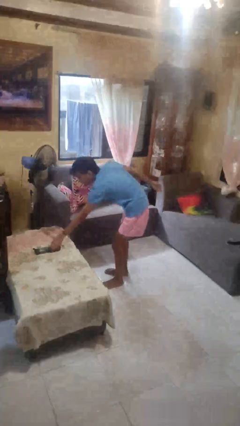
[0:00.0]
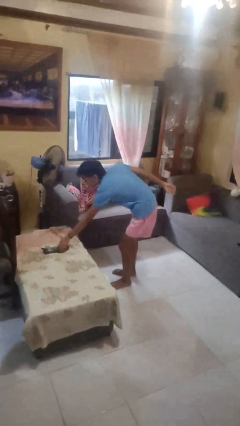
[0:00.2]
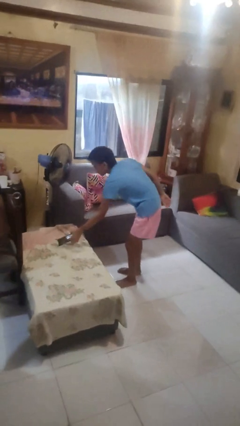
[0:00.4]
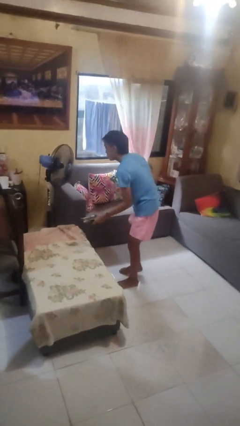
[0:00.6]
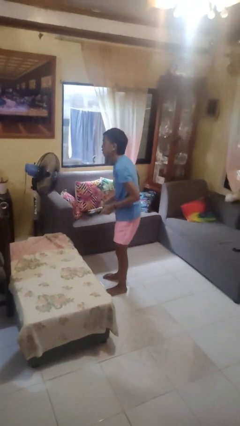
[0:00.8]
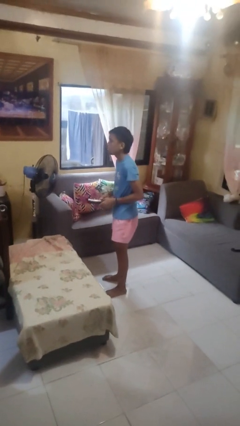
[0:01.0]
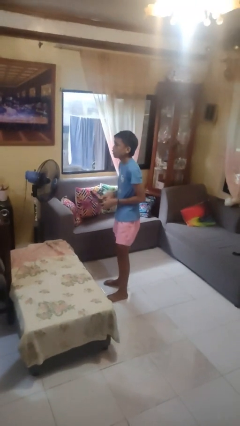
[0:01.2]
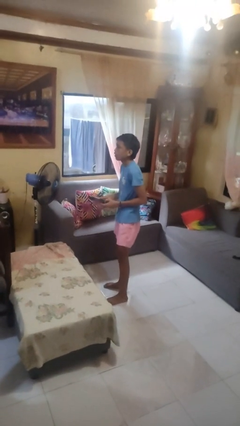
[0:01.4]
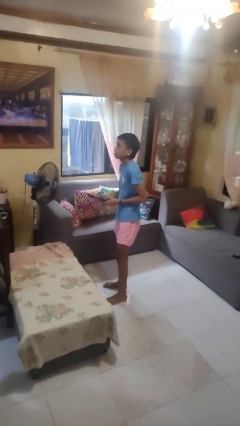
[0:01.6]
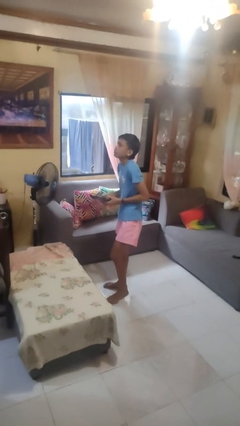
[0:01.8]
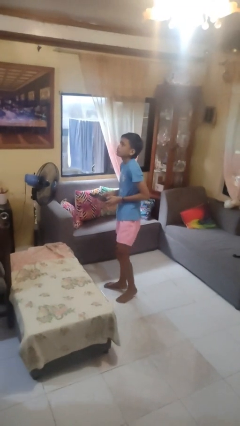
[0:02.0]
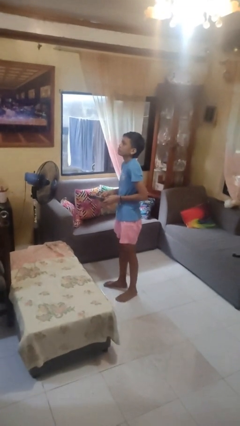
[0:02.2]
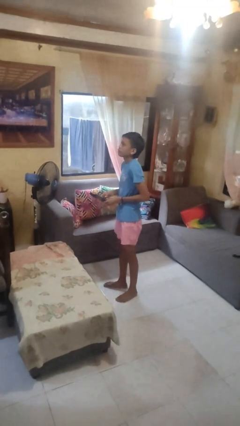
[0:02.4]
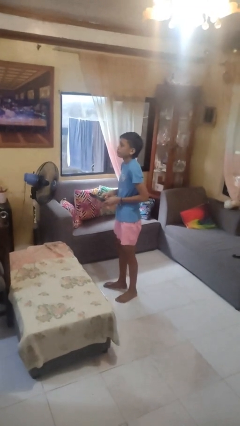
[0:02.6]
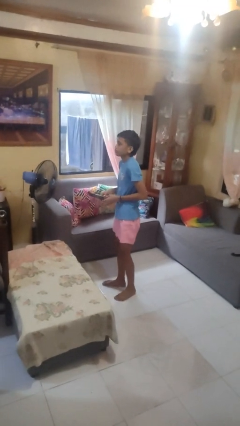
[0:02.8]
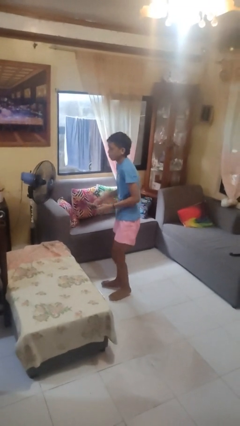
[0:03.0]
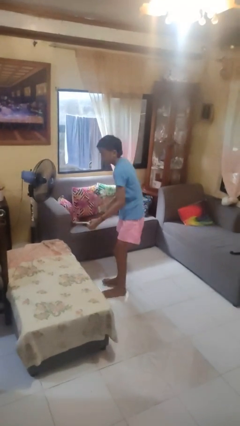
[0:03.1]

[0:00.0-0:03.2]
person picks up object from couch

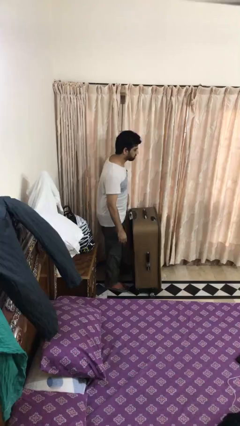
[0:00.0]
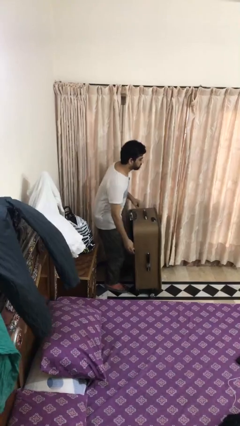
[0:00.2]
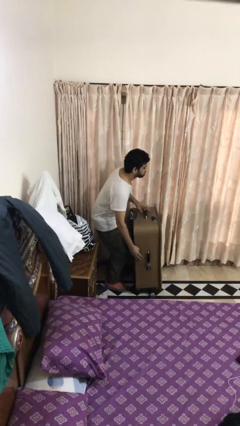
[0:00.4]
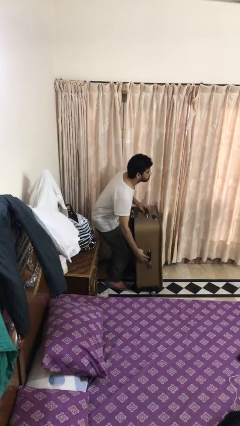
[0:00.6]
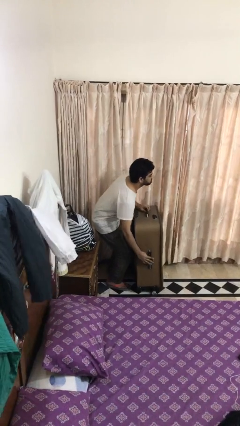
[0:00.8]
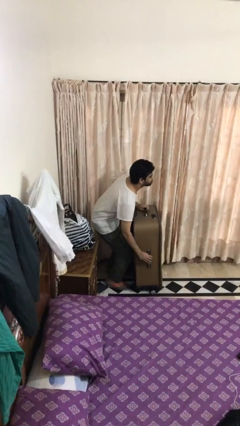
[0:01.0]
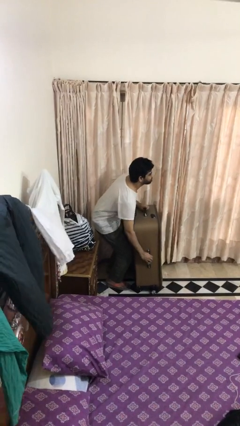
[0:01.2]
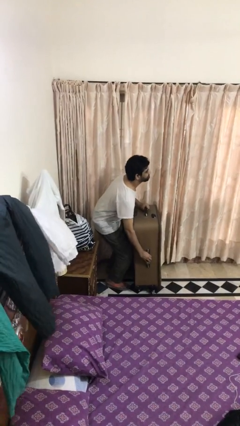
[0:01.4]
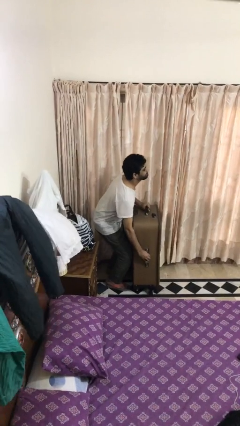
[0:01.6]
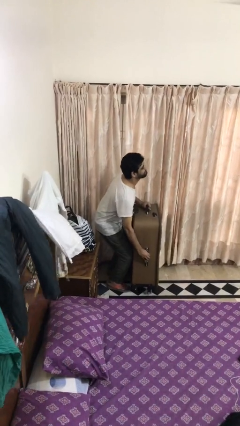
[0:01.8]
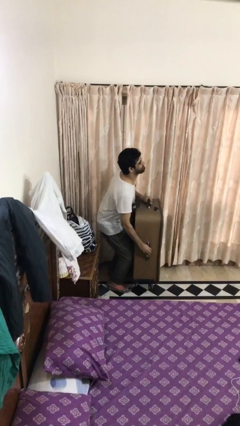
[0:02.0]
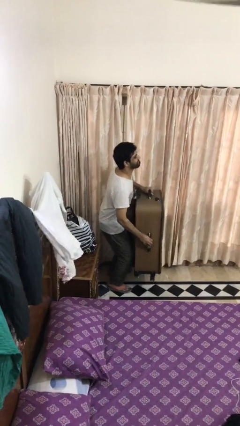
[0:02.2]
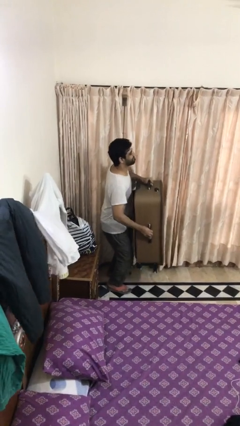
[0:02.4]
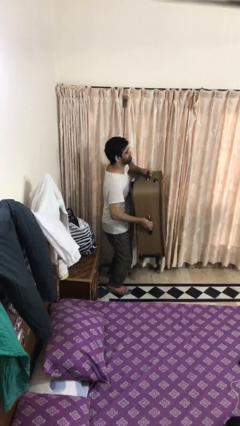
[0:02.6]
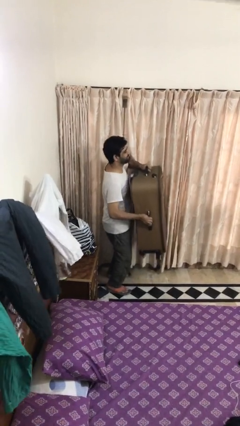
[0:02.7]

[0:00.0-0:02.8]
person picks up object from floor

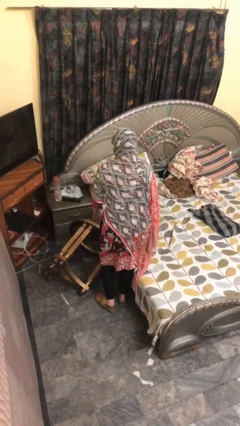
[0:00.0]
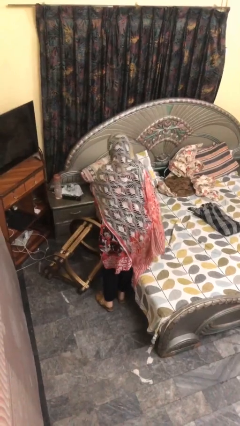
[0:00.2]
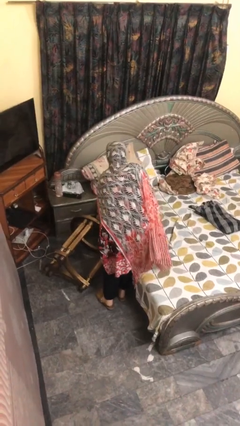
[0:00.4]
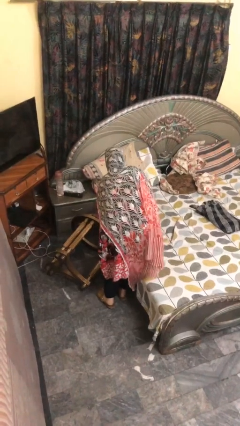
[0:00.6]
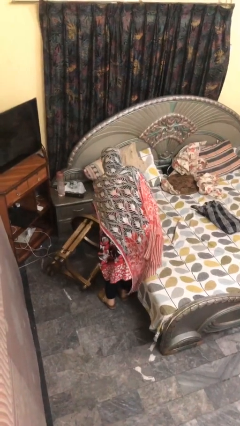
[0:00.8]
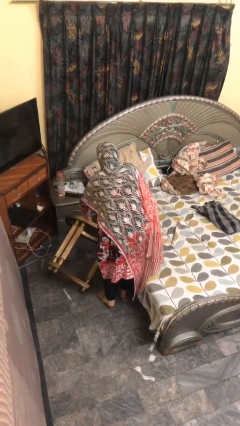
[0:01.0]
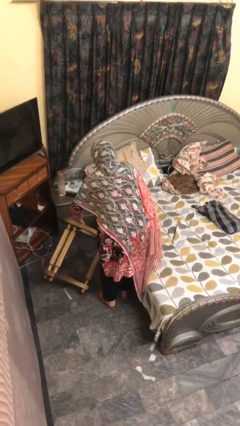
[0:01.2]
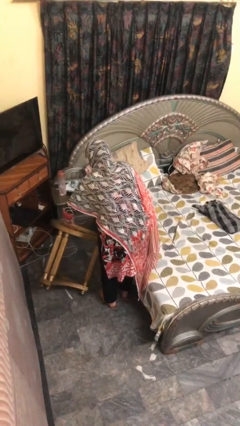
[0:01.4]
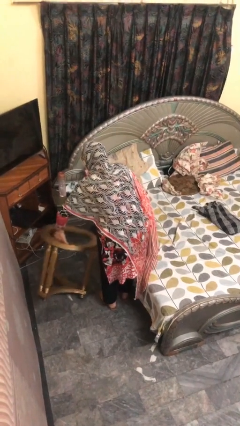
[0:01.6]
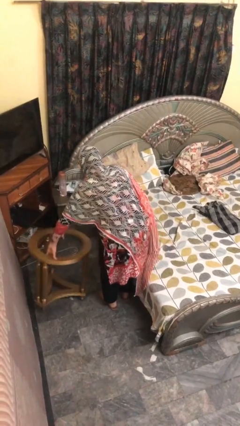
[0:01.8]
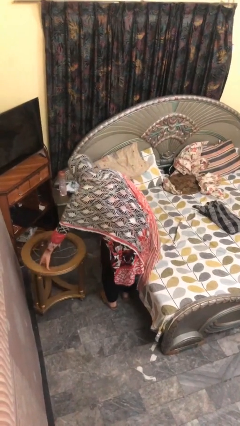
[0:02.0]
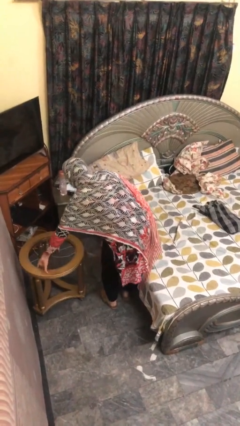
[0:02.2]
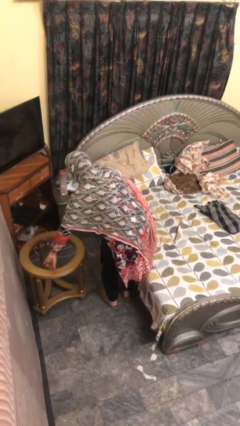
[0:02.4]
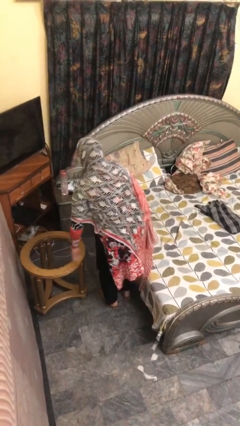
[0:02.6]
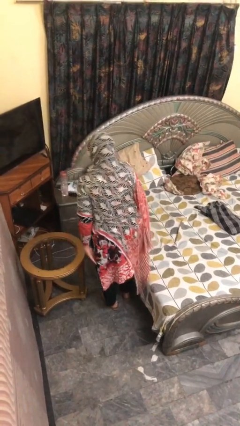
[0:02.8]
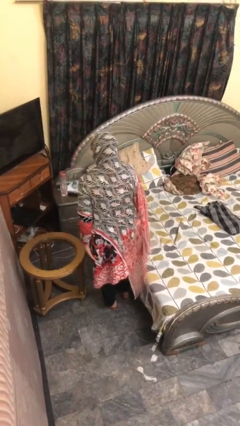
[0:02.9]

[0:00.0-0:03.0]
person sets upright furniture

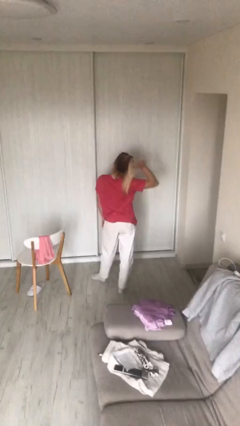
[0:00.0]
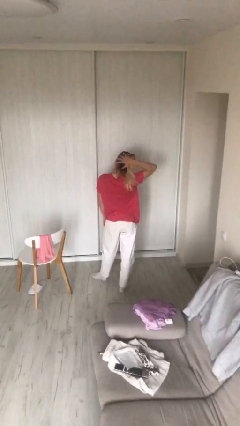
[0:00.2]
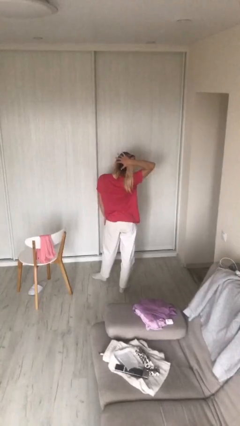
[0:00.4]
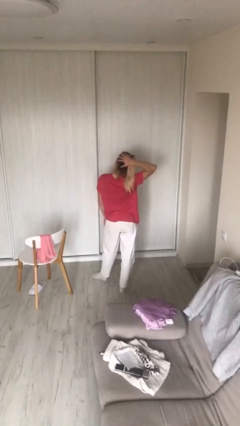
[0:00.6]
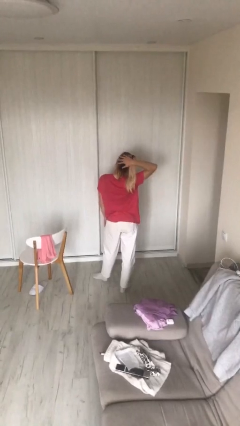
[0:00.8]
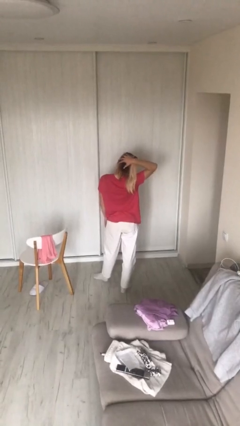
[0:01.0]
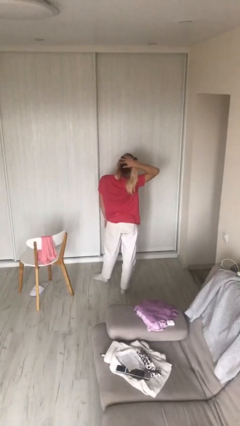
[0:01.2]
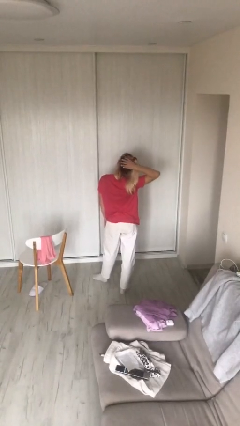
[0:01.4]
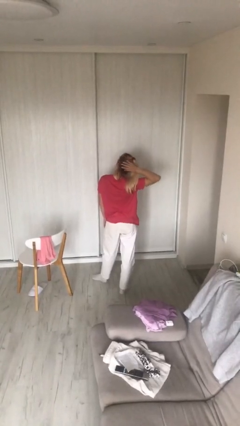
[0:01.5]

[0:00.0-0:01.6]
person pats head

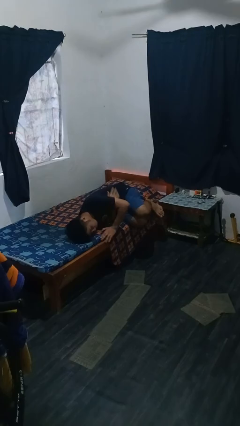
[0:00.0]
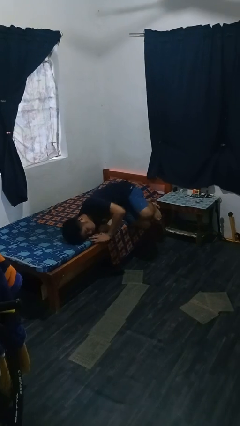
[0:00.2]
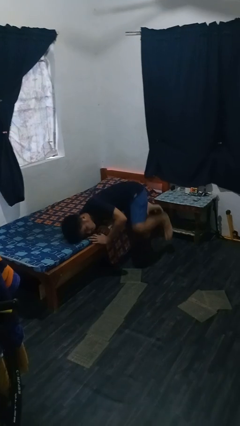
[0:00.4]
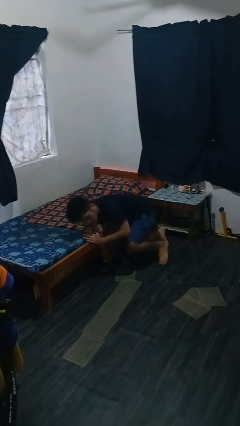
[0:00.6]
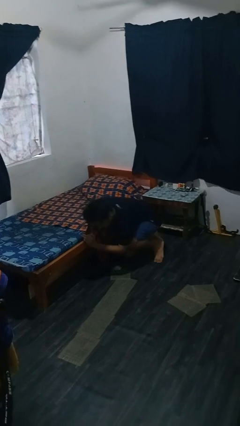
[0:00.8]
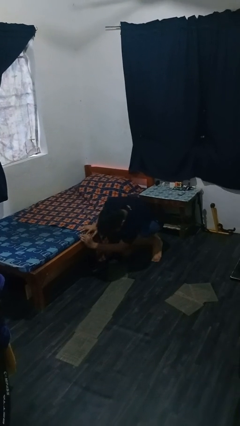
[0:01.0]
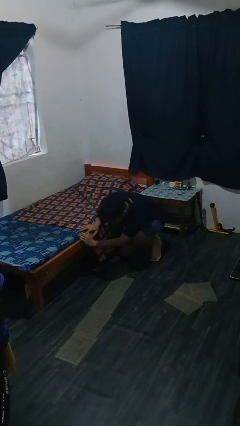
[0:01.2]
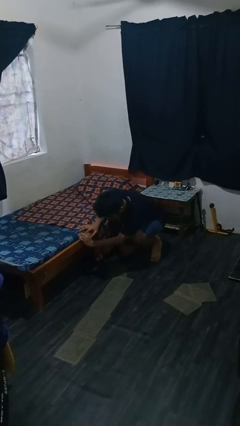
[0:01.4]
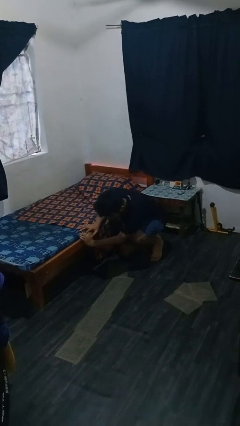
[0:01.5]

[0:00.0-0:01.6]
person falls from bed

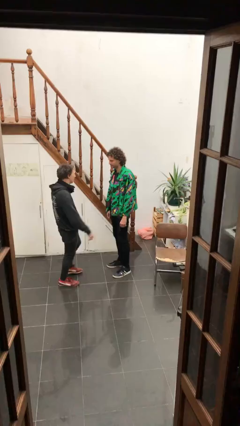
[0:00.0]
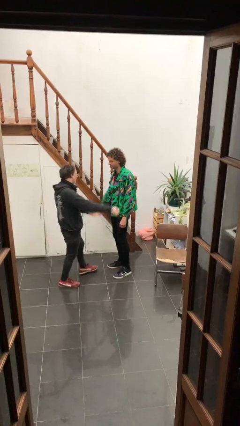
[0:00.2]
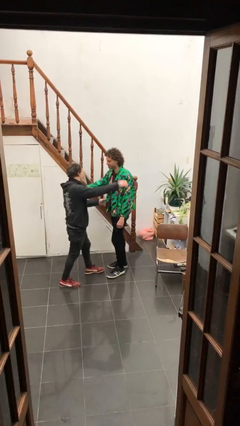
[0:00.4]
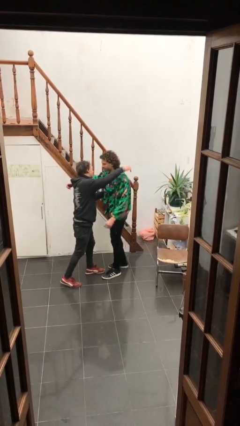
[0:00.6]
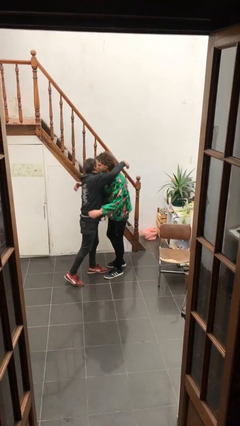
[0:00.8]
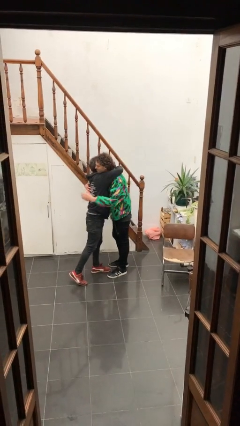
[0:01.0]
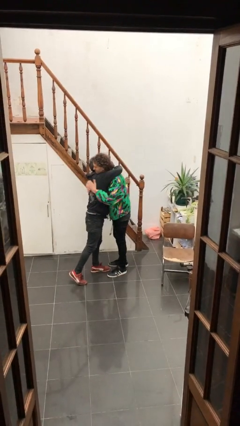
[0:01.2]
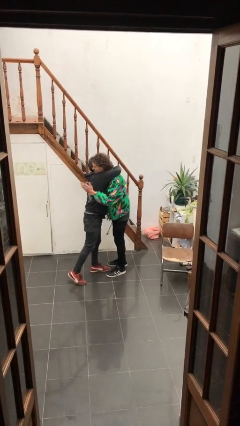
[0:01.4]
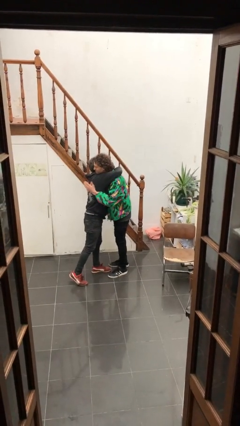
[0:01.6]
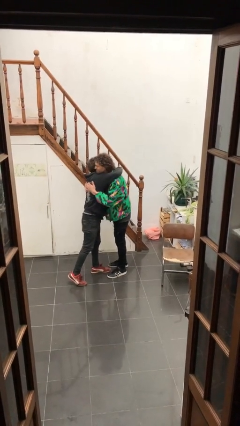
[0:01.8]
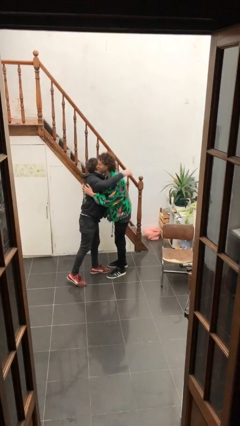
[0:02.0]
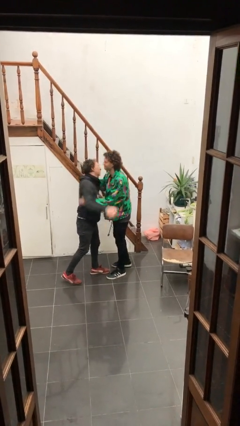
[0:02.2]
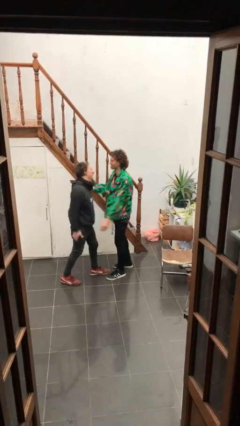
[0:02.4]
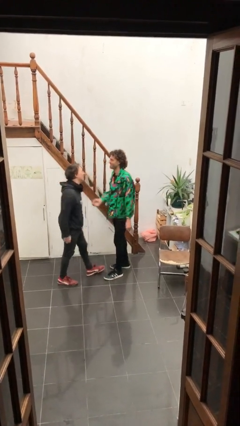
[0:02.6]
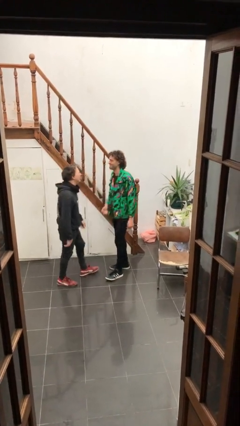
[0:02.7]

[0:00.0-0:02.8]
person embraces person

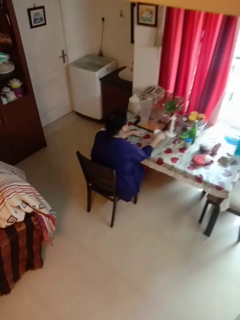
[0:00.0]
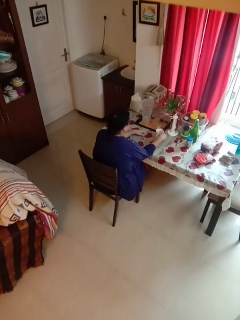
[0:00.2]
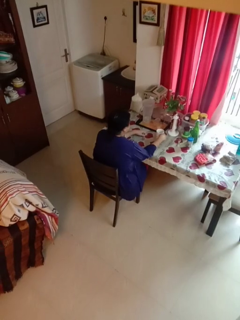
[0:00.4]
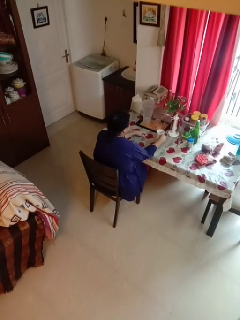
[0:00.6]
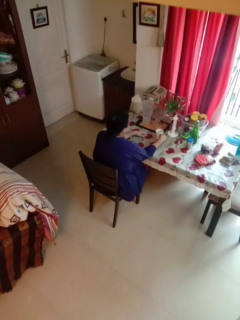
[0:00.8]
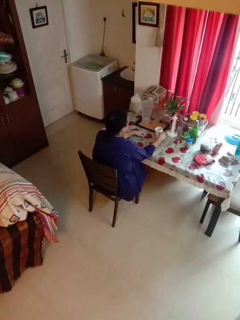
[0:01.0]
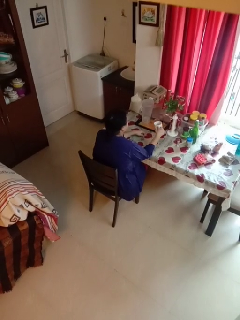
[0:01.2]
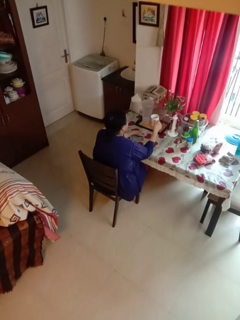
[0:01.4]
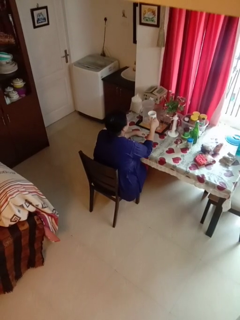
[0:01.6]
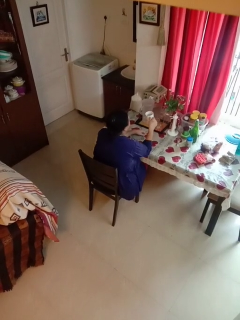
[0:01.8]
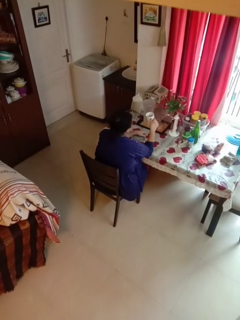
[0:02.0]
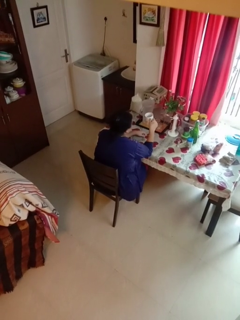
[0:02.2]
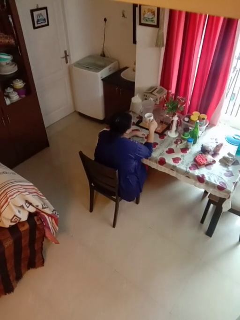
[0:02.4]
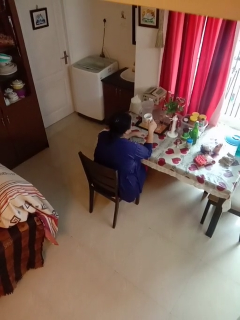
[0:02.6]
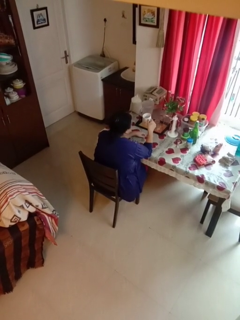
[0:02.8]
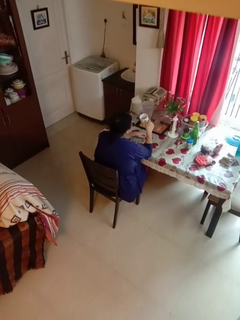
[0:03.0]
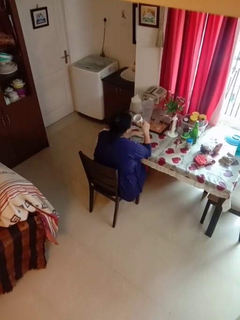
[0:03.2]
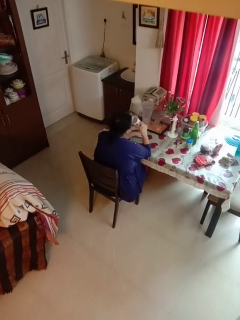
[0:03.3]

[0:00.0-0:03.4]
person picks up object from table
